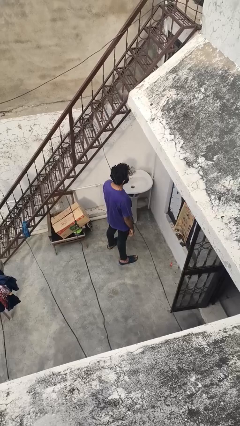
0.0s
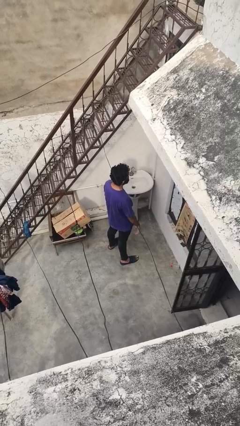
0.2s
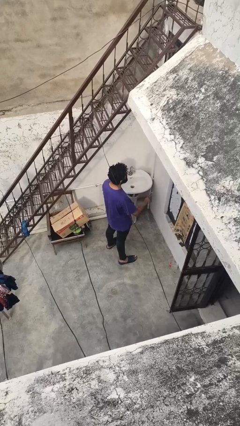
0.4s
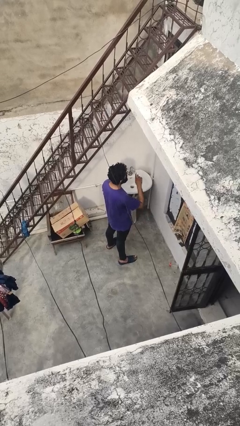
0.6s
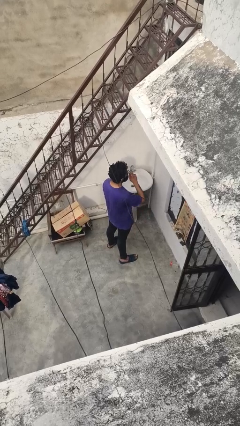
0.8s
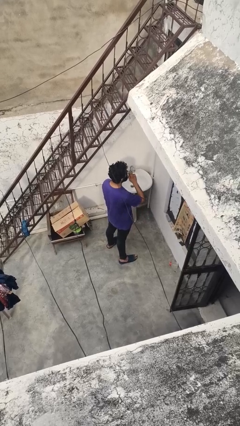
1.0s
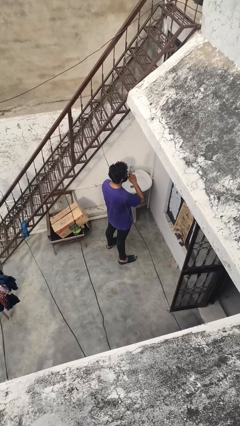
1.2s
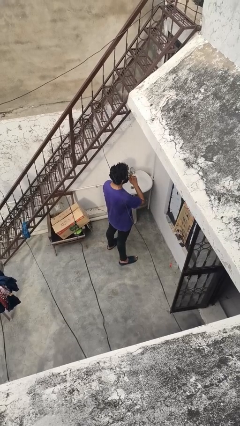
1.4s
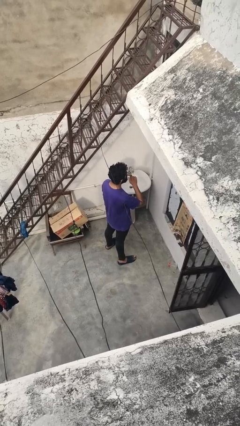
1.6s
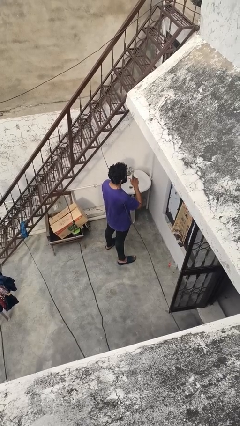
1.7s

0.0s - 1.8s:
person gestures be quiet

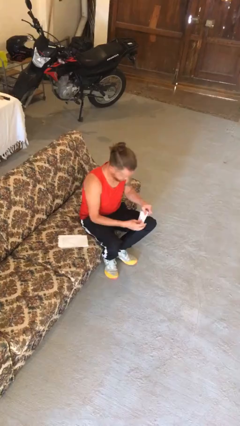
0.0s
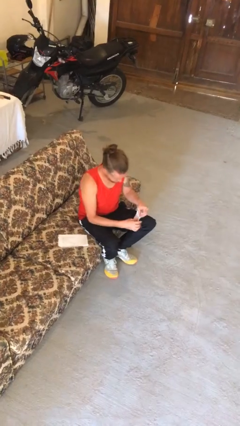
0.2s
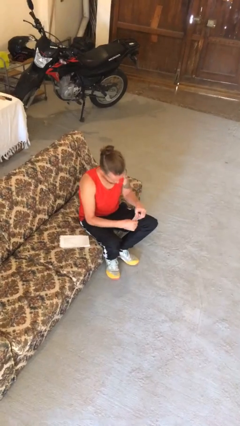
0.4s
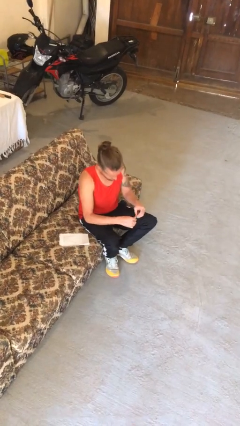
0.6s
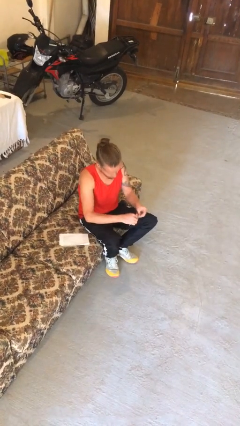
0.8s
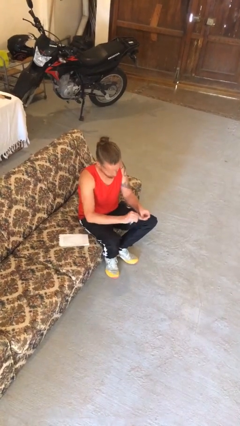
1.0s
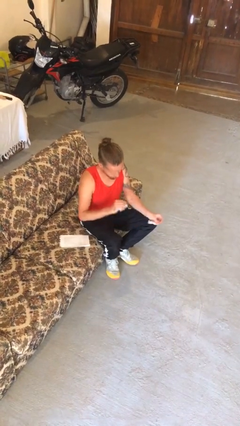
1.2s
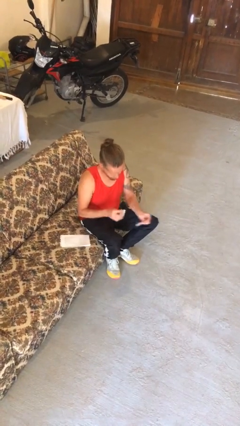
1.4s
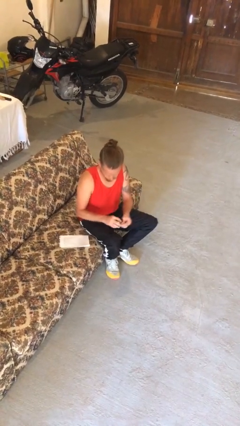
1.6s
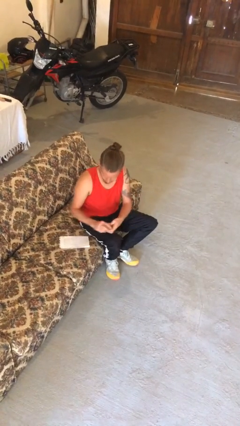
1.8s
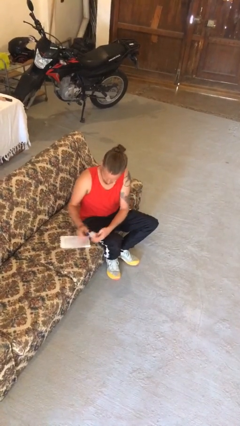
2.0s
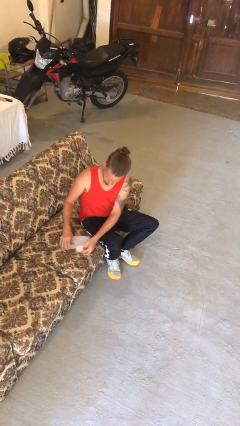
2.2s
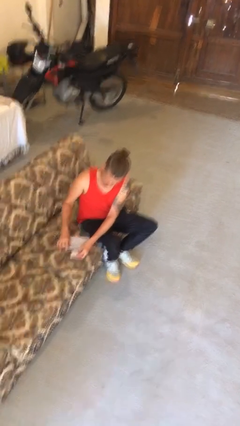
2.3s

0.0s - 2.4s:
person tears paper

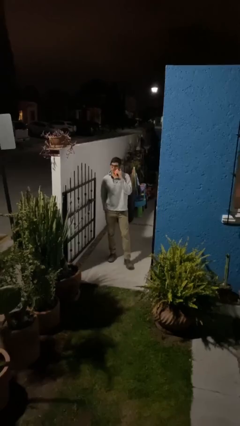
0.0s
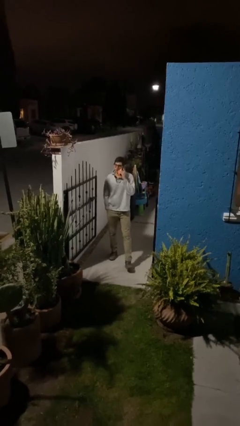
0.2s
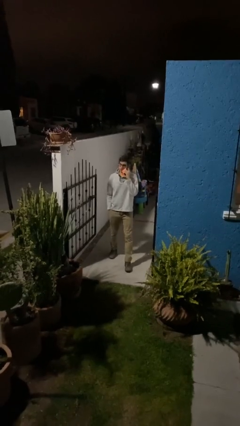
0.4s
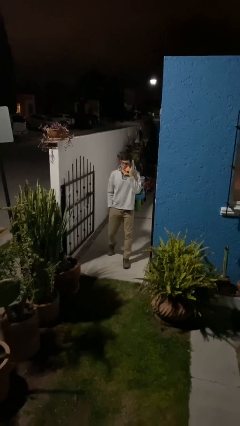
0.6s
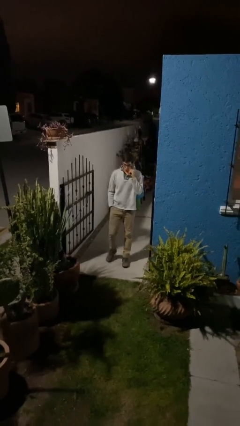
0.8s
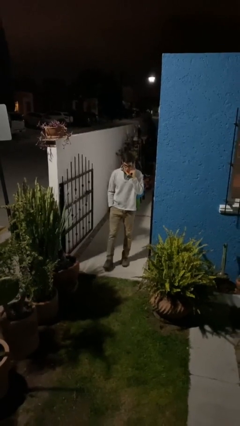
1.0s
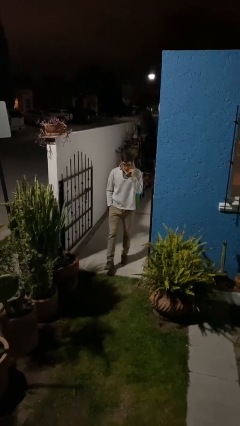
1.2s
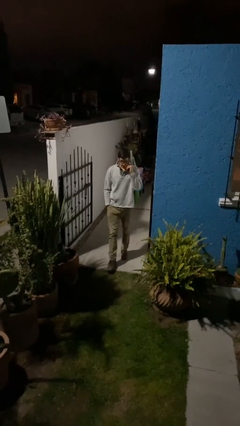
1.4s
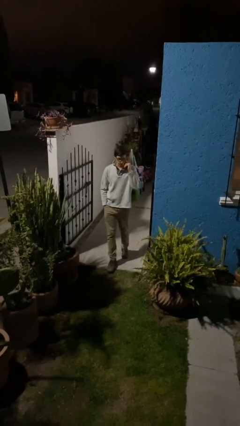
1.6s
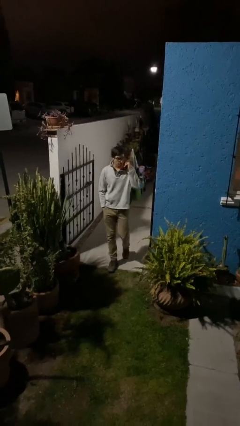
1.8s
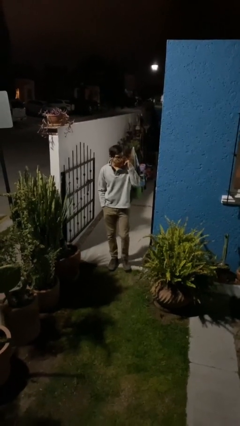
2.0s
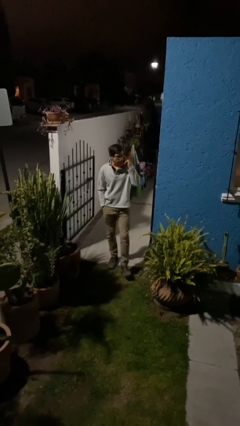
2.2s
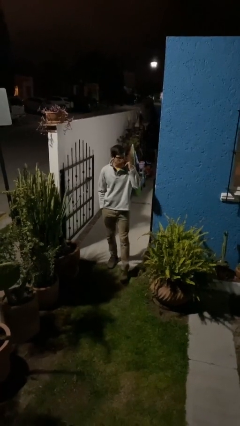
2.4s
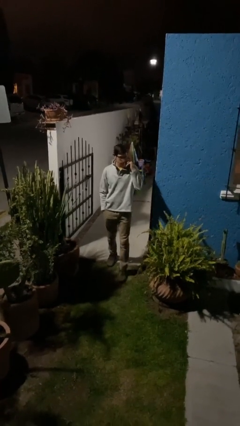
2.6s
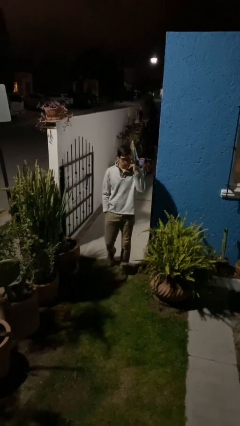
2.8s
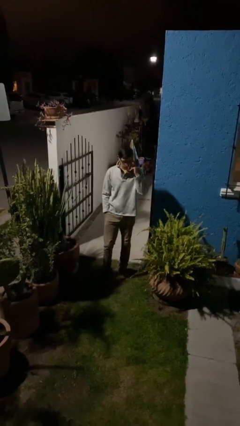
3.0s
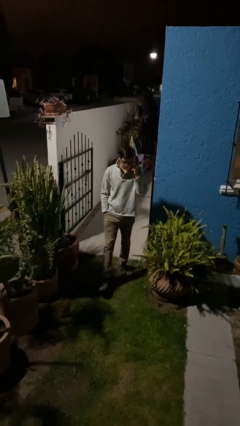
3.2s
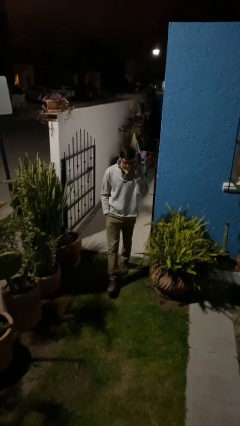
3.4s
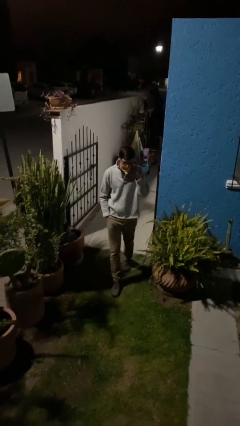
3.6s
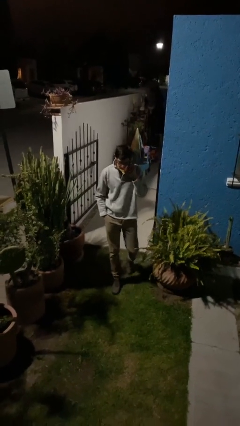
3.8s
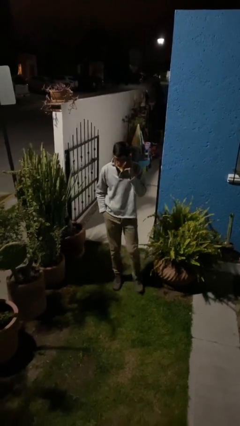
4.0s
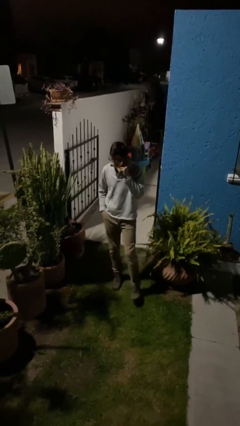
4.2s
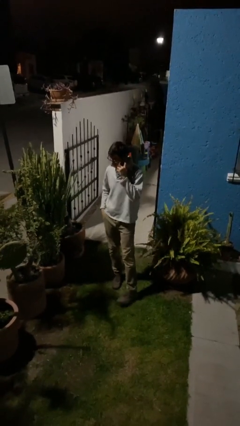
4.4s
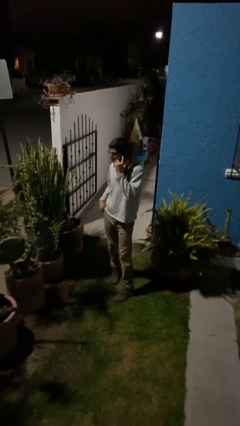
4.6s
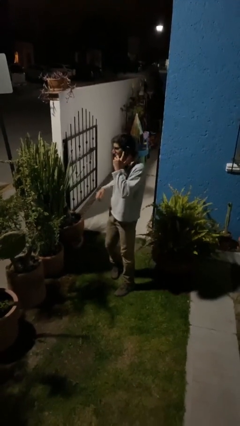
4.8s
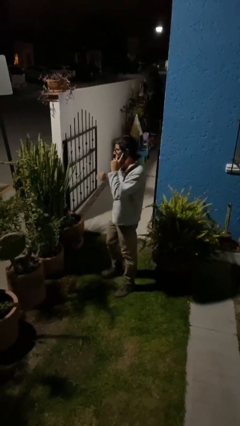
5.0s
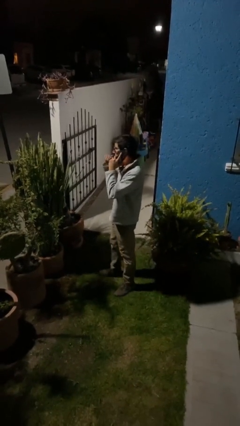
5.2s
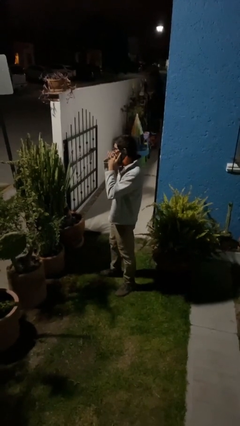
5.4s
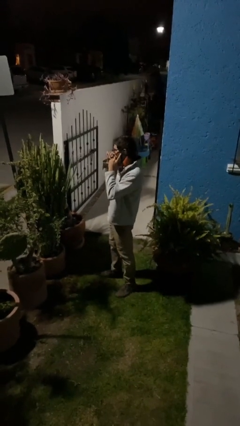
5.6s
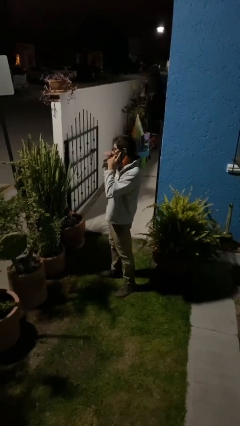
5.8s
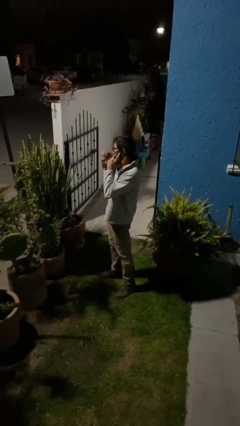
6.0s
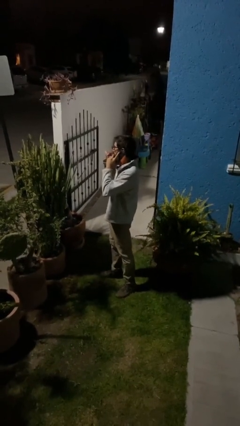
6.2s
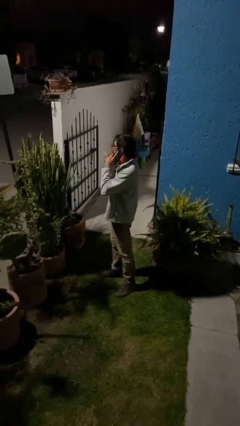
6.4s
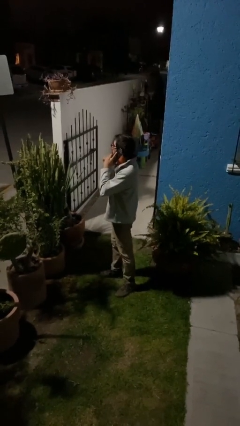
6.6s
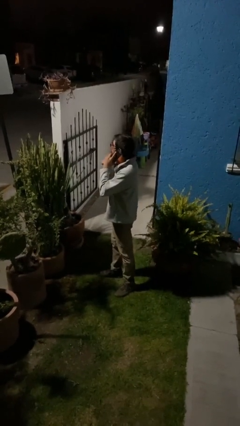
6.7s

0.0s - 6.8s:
person enters scene through structure

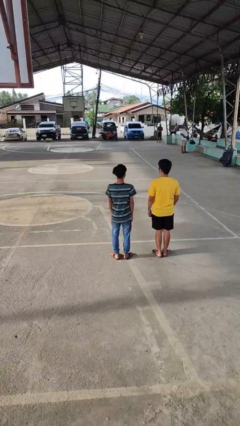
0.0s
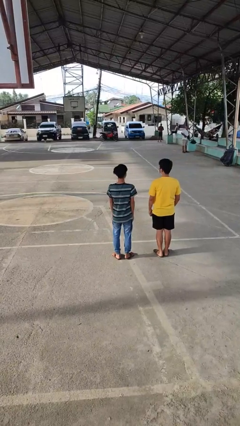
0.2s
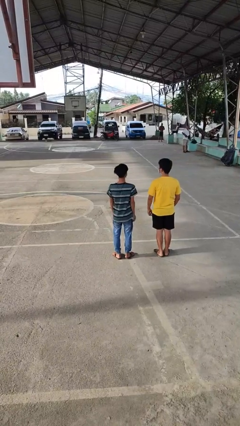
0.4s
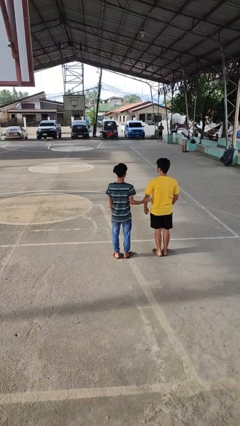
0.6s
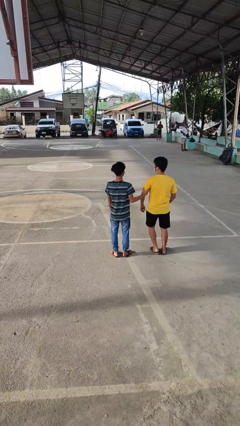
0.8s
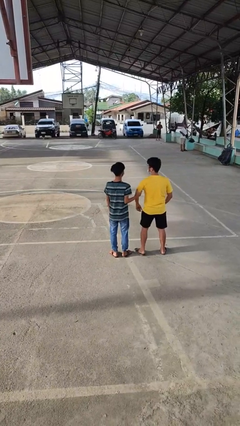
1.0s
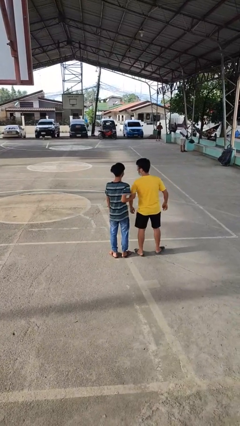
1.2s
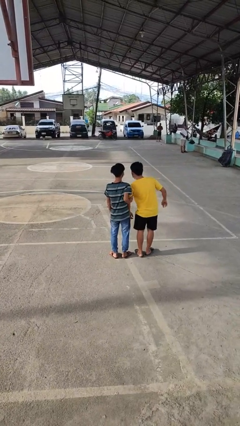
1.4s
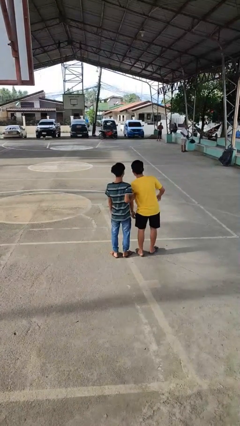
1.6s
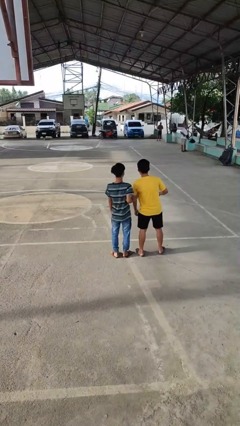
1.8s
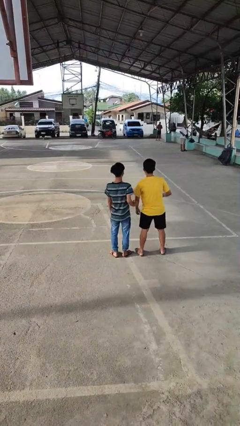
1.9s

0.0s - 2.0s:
person grabs person by bicep

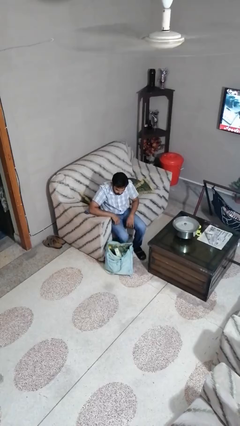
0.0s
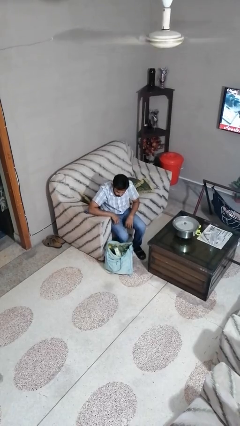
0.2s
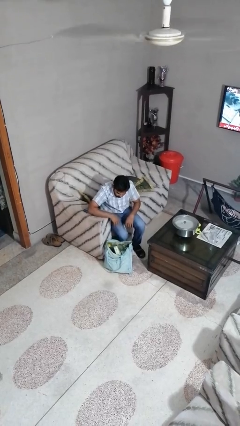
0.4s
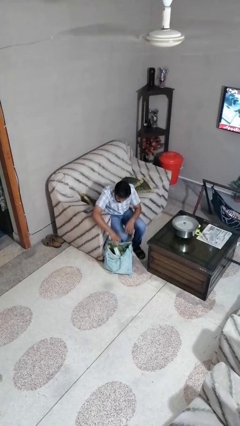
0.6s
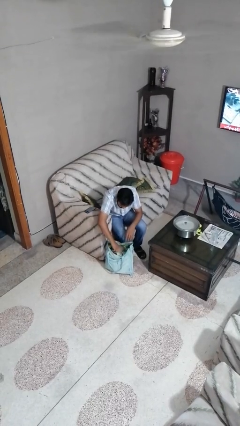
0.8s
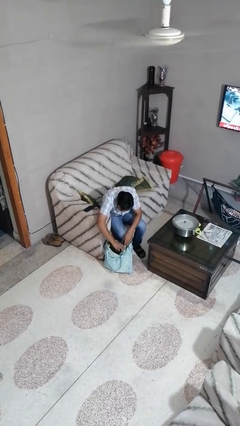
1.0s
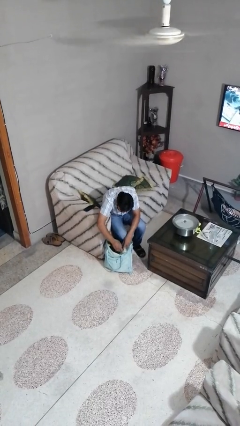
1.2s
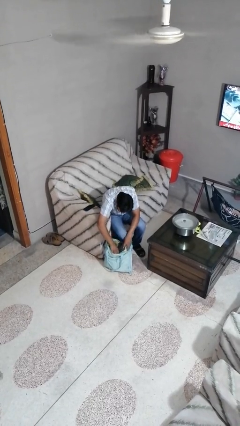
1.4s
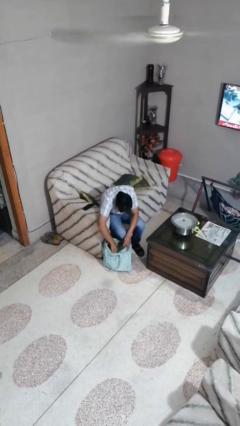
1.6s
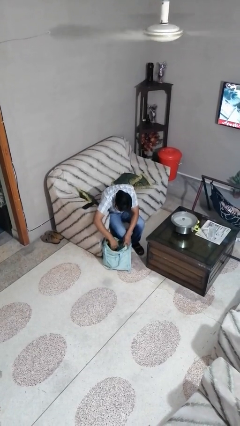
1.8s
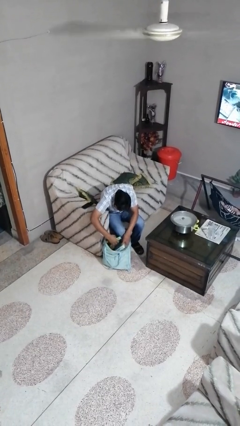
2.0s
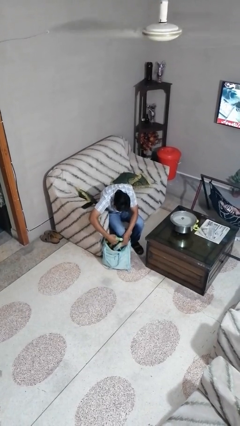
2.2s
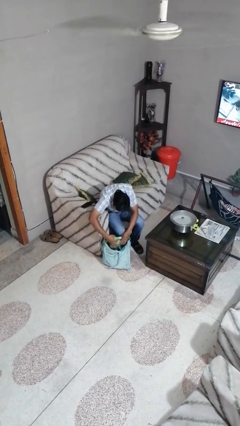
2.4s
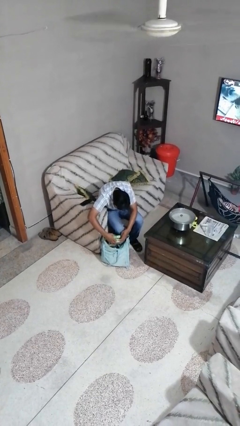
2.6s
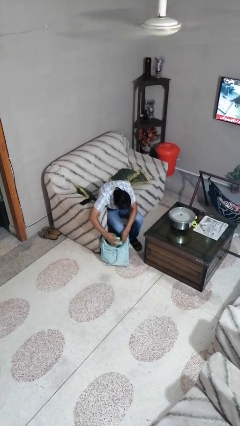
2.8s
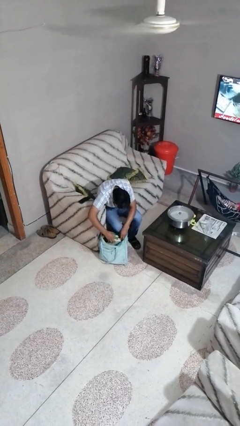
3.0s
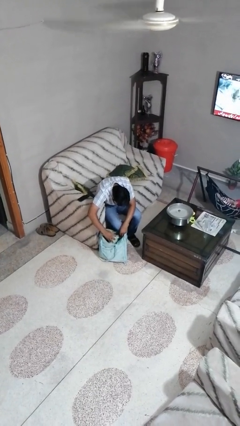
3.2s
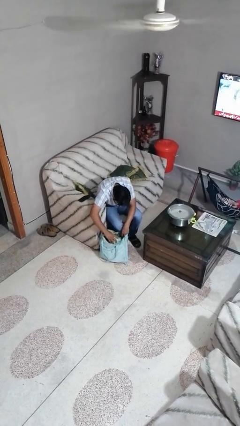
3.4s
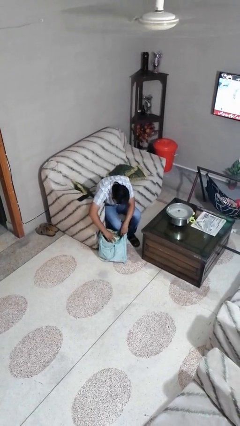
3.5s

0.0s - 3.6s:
person searches in bag

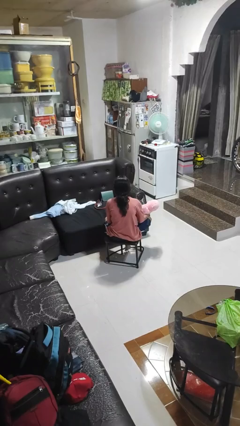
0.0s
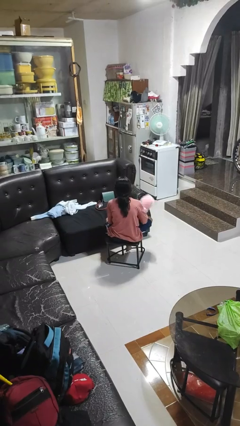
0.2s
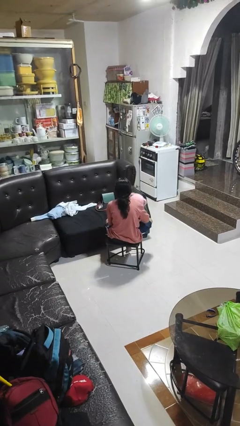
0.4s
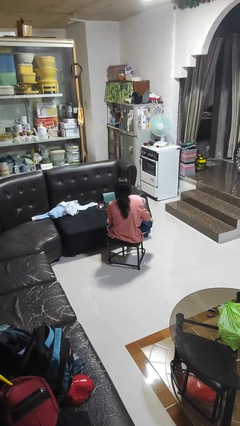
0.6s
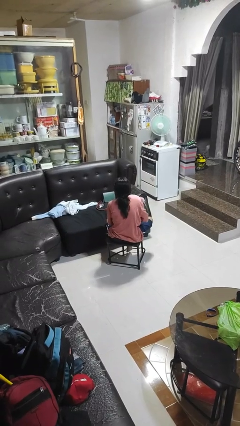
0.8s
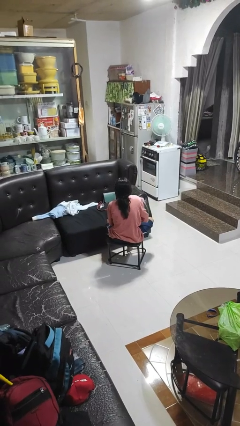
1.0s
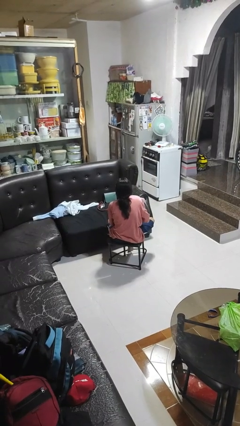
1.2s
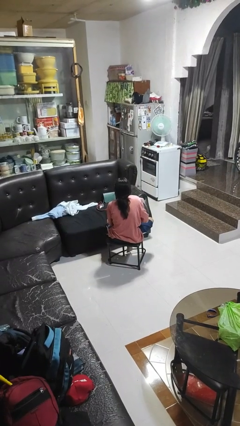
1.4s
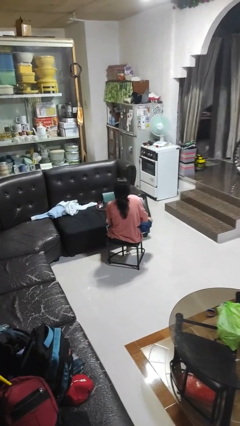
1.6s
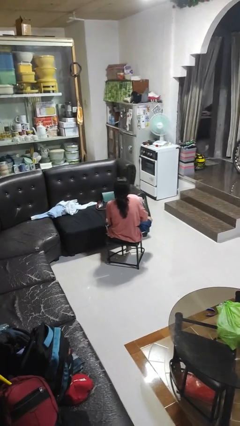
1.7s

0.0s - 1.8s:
person hugs stuffed animal
